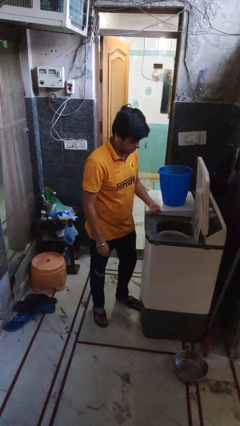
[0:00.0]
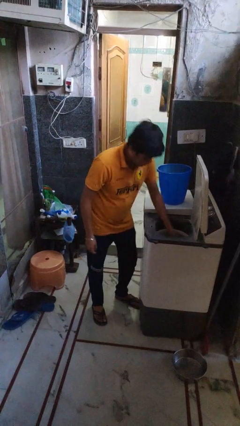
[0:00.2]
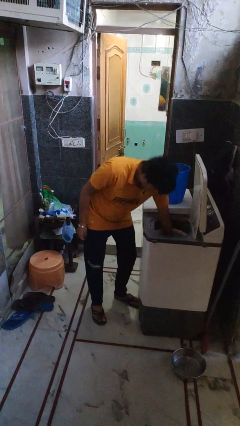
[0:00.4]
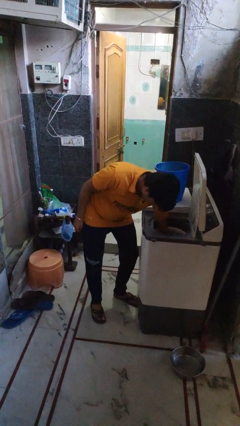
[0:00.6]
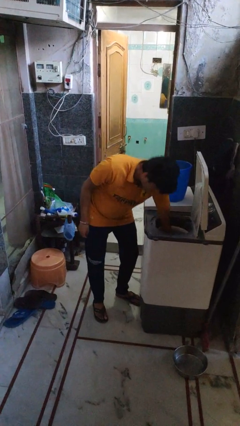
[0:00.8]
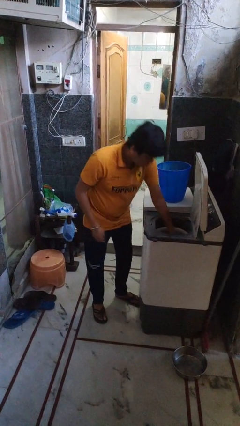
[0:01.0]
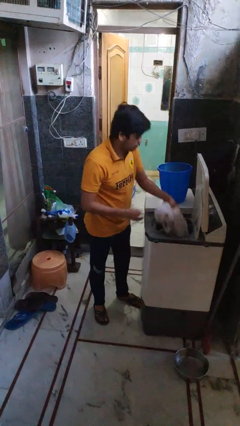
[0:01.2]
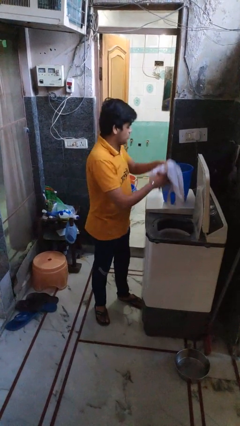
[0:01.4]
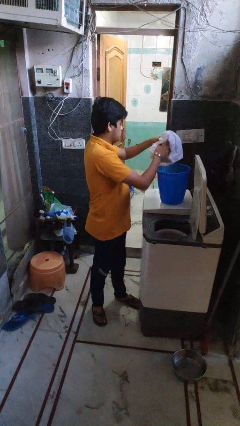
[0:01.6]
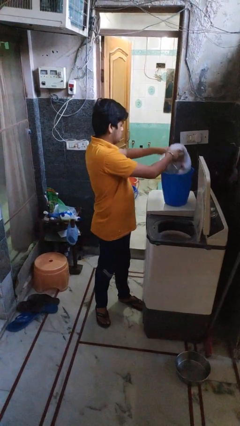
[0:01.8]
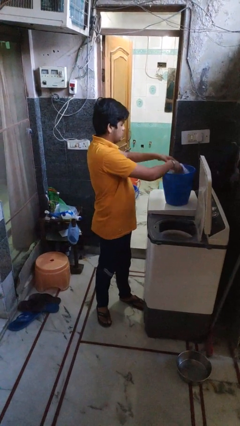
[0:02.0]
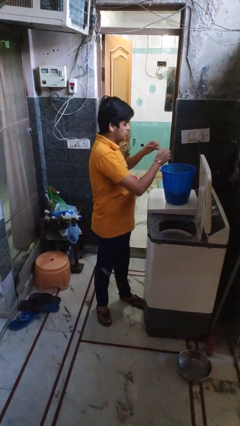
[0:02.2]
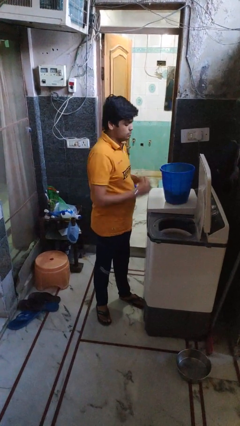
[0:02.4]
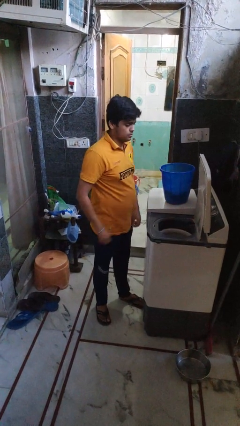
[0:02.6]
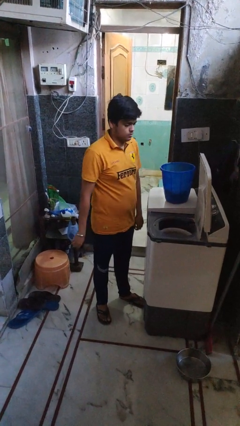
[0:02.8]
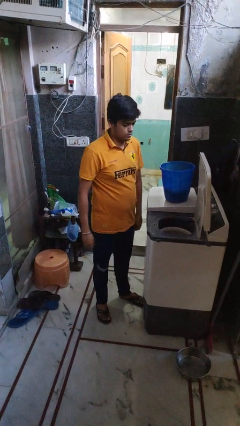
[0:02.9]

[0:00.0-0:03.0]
person unloads clotheswasher

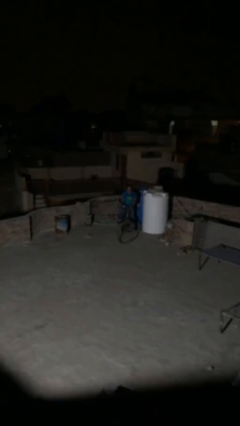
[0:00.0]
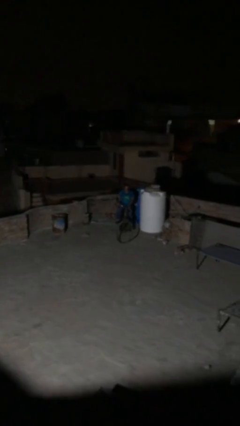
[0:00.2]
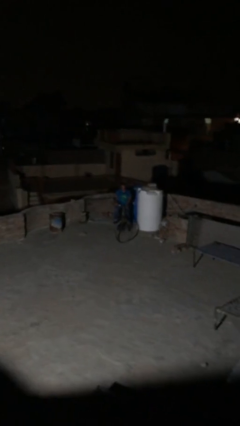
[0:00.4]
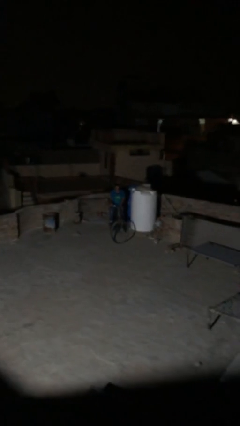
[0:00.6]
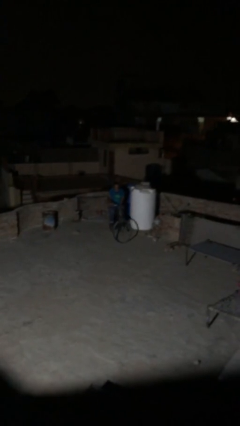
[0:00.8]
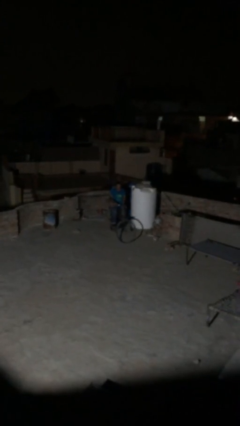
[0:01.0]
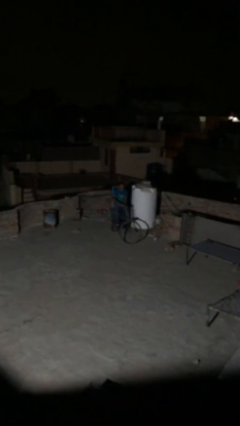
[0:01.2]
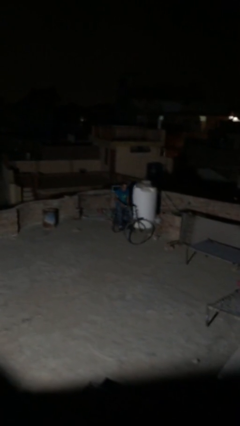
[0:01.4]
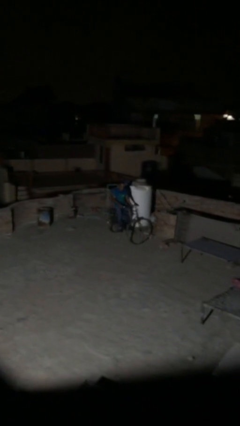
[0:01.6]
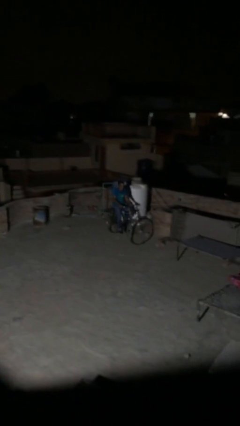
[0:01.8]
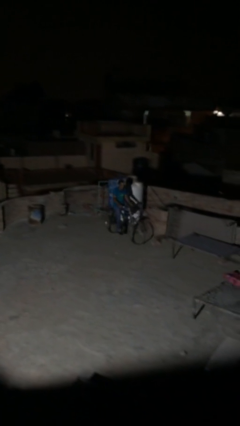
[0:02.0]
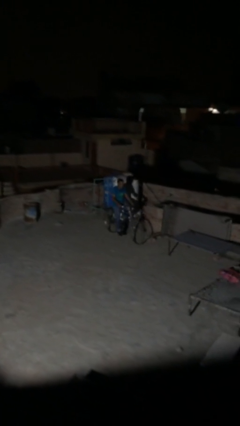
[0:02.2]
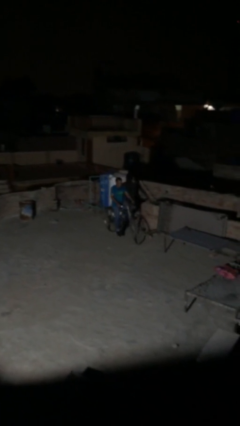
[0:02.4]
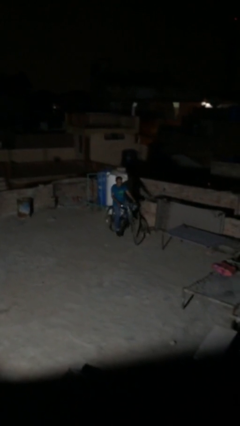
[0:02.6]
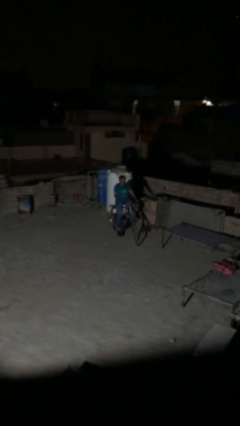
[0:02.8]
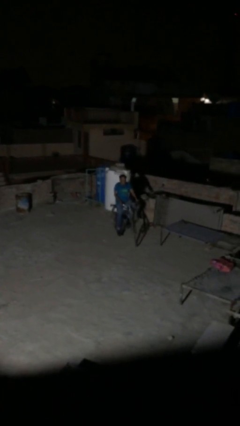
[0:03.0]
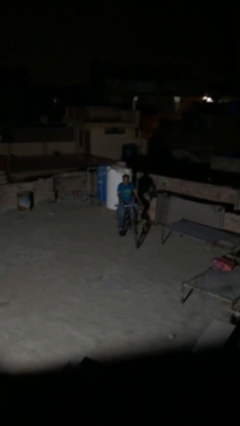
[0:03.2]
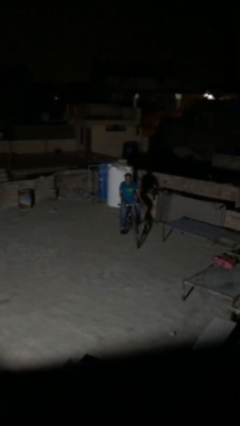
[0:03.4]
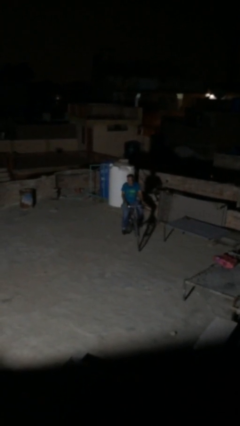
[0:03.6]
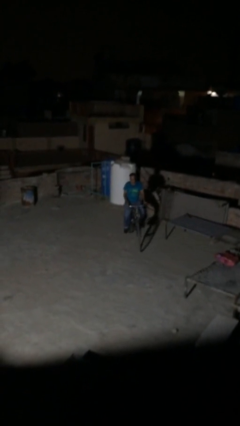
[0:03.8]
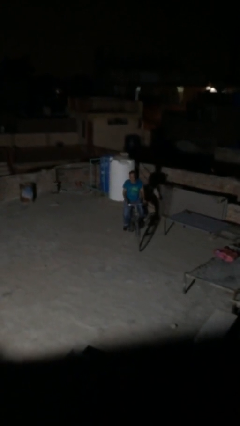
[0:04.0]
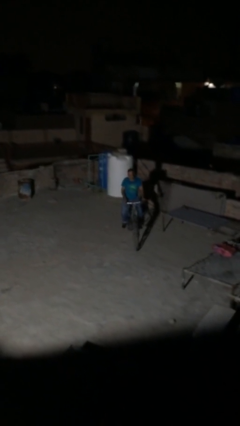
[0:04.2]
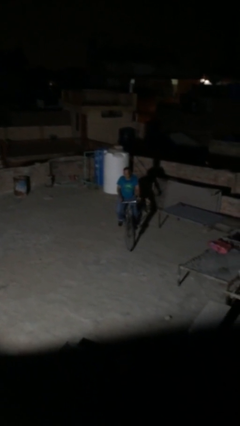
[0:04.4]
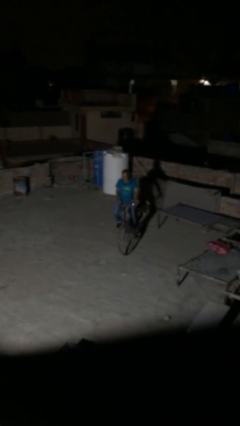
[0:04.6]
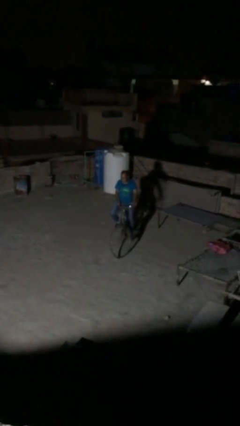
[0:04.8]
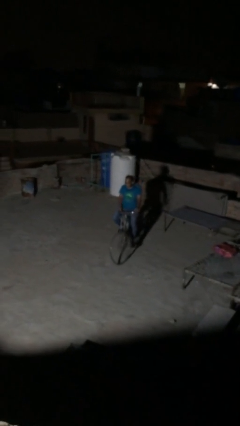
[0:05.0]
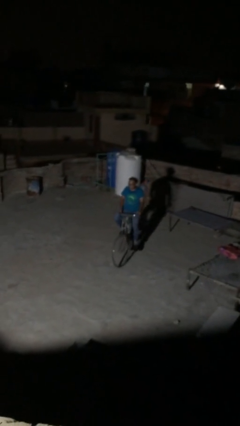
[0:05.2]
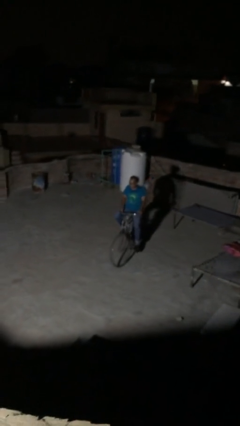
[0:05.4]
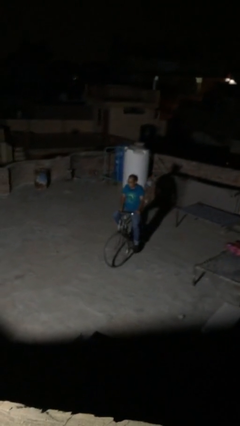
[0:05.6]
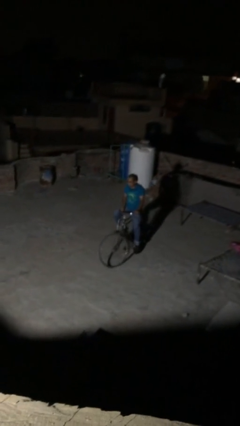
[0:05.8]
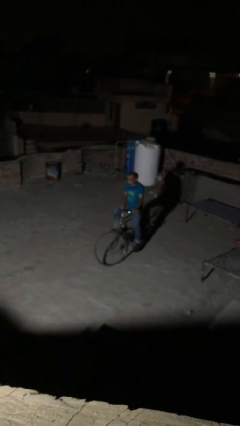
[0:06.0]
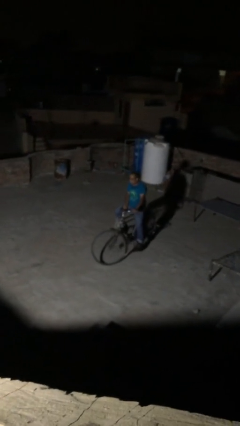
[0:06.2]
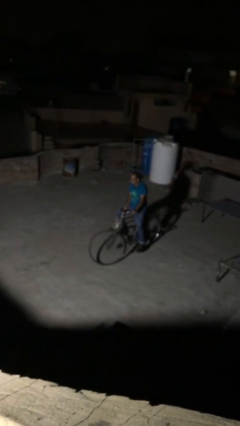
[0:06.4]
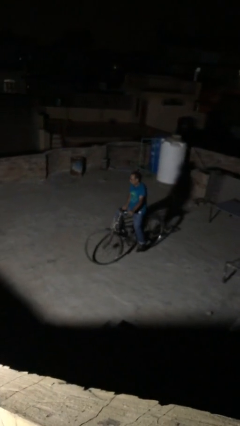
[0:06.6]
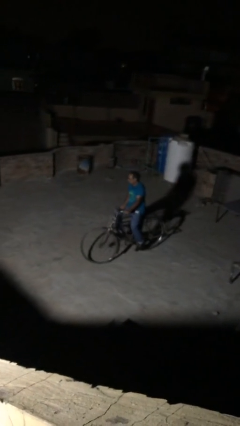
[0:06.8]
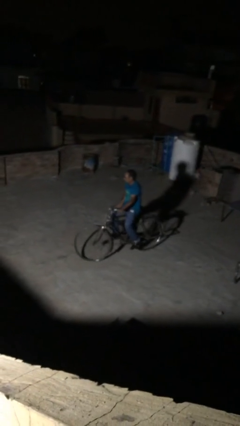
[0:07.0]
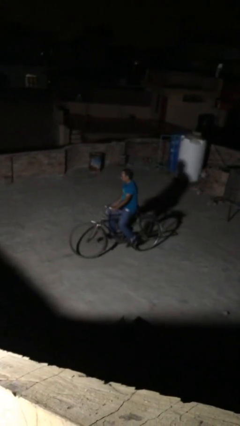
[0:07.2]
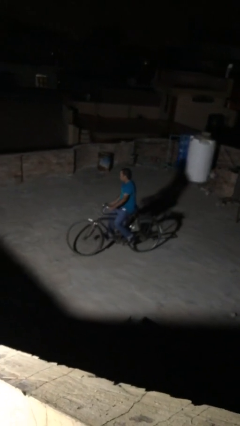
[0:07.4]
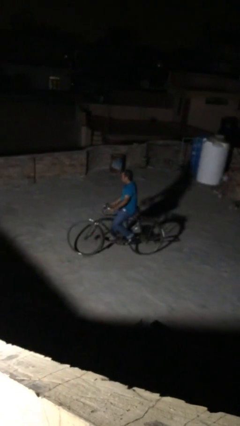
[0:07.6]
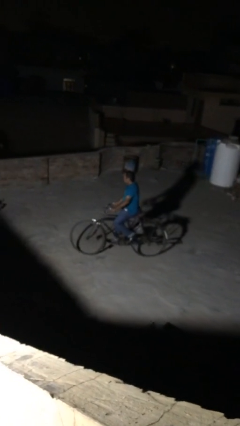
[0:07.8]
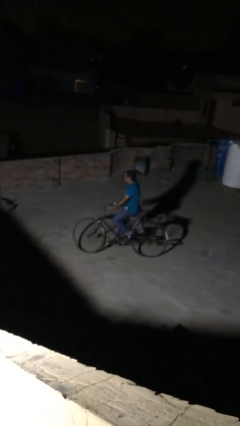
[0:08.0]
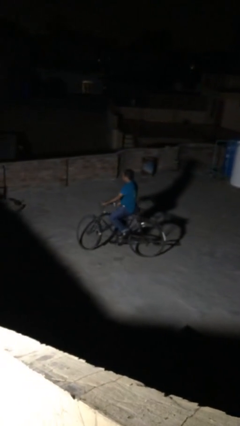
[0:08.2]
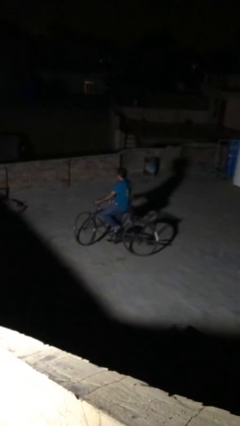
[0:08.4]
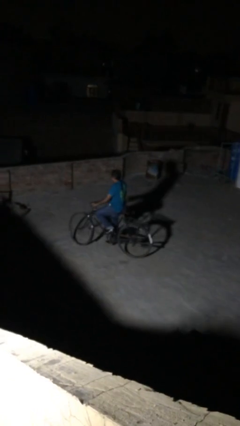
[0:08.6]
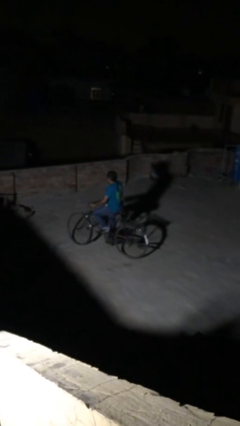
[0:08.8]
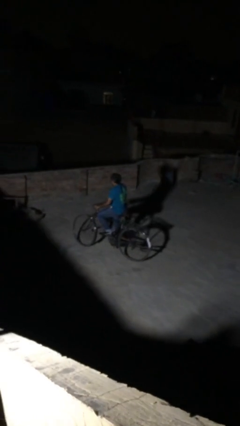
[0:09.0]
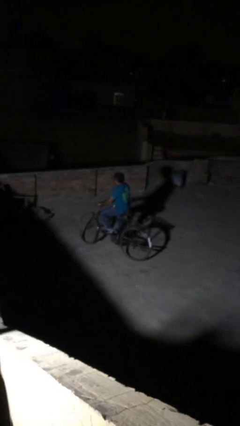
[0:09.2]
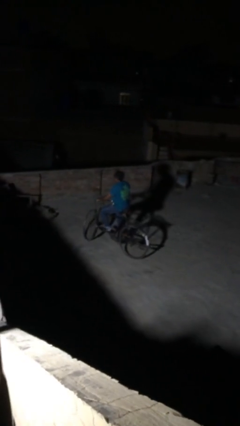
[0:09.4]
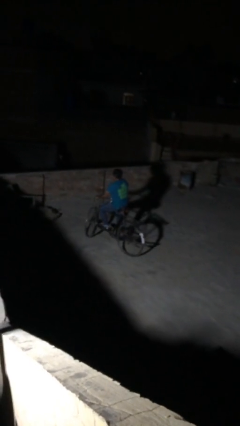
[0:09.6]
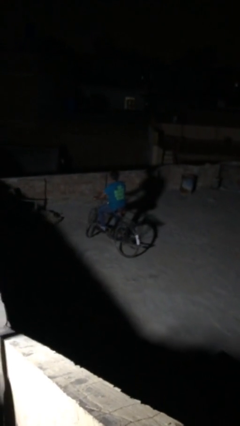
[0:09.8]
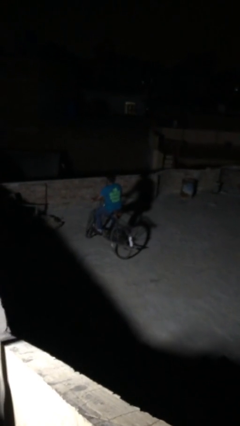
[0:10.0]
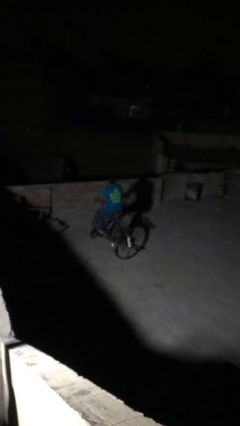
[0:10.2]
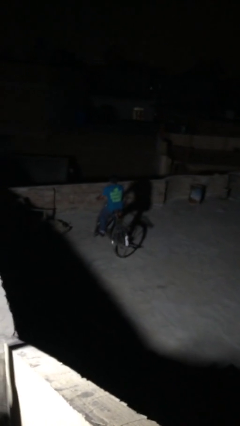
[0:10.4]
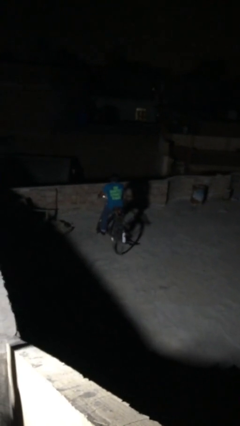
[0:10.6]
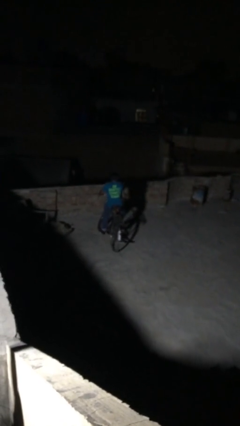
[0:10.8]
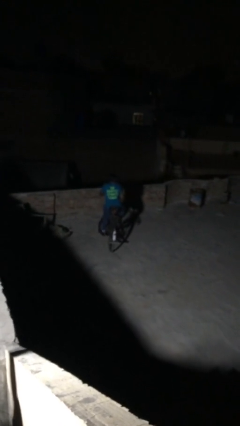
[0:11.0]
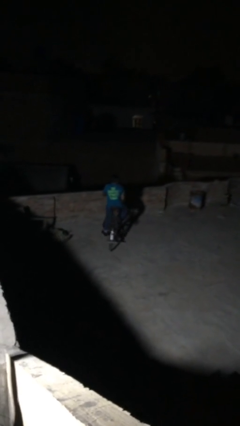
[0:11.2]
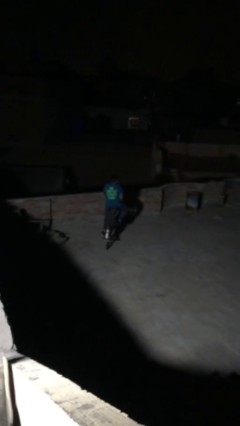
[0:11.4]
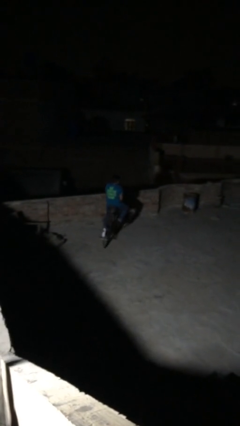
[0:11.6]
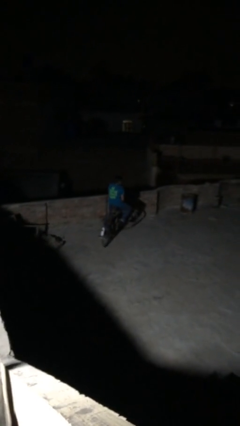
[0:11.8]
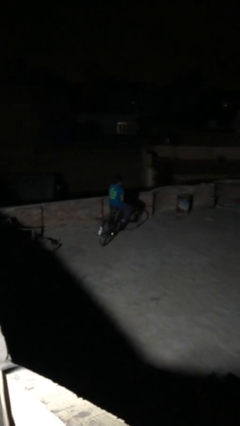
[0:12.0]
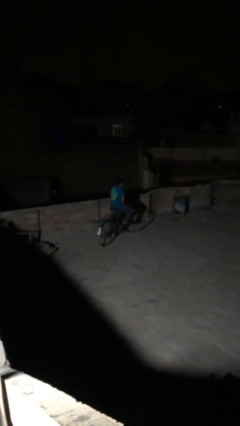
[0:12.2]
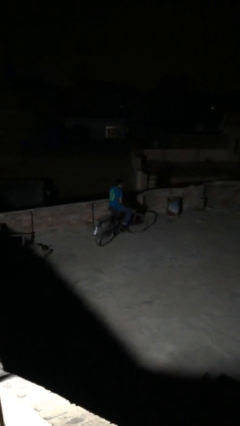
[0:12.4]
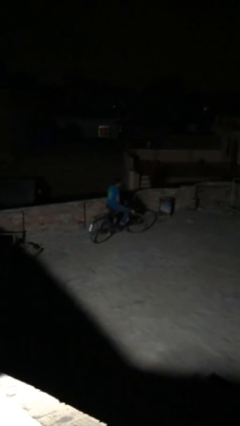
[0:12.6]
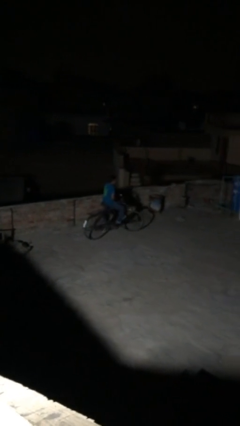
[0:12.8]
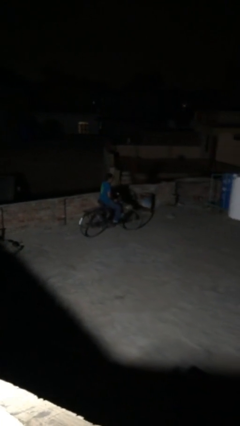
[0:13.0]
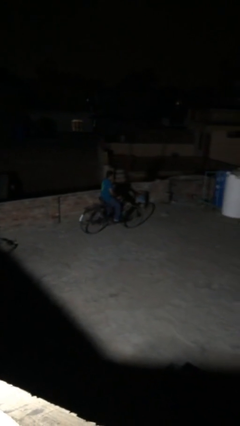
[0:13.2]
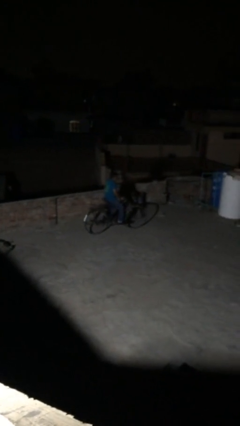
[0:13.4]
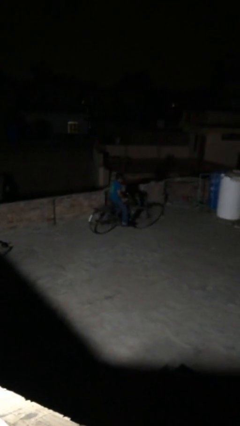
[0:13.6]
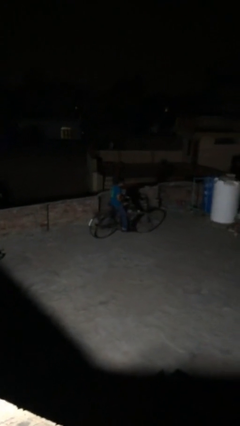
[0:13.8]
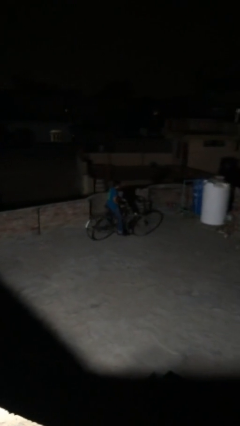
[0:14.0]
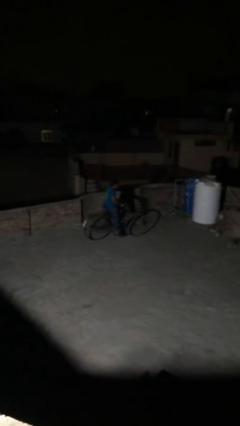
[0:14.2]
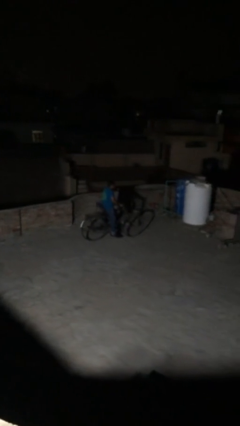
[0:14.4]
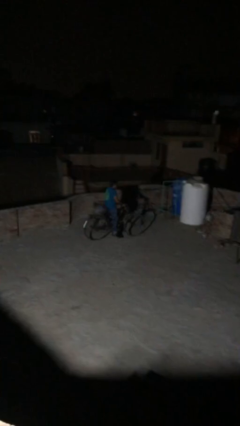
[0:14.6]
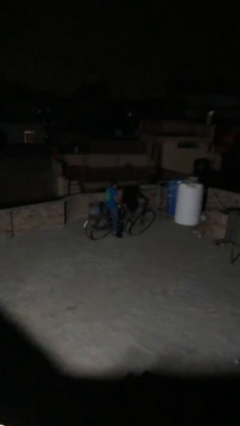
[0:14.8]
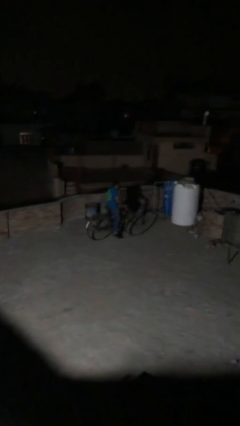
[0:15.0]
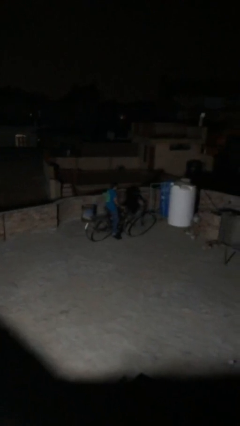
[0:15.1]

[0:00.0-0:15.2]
person rides bicycle

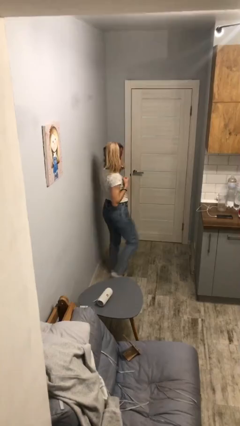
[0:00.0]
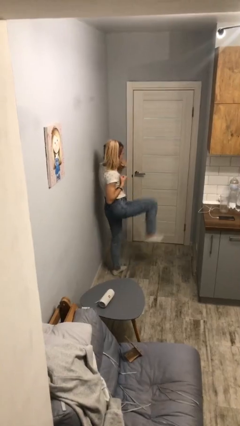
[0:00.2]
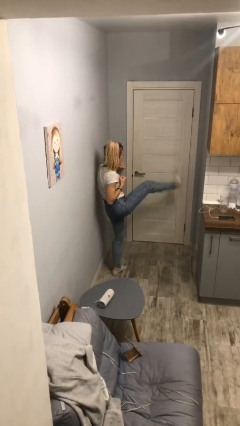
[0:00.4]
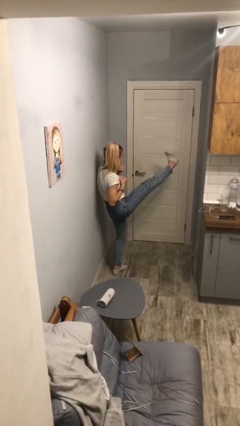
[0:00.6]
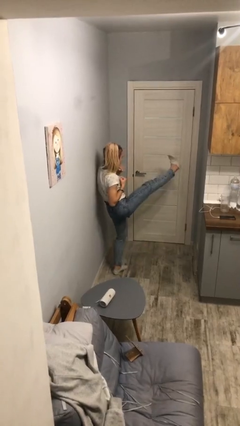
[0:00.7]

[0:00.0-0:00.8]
person karate kicks
